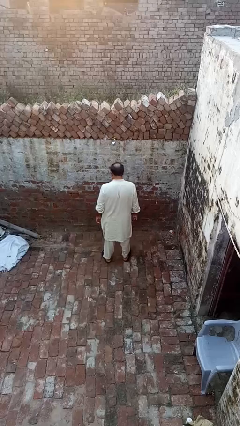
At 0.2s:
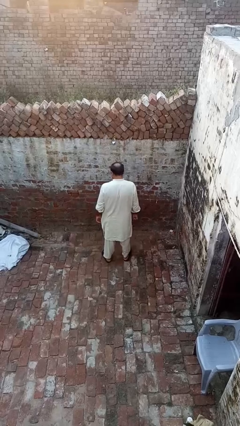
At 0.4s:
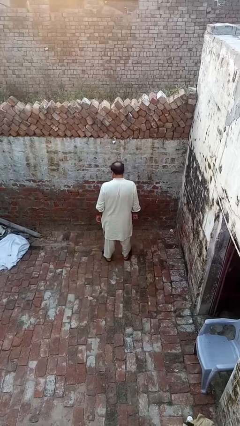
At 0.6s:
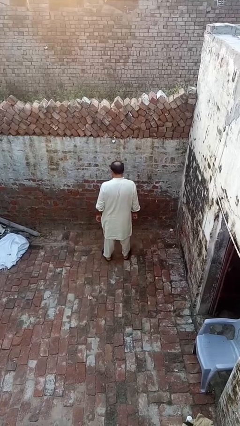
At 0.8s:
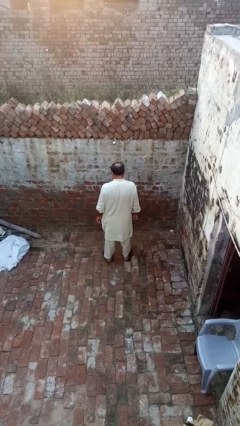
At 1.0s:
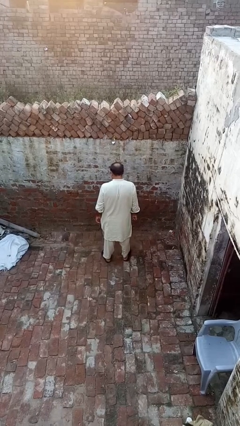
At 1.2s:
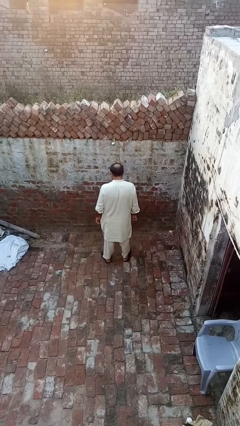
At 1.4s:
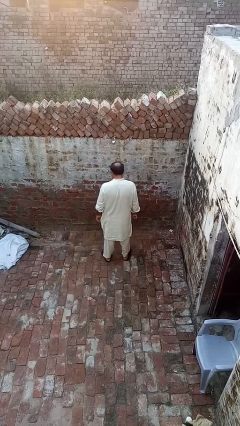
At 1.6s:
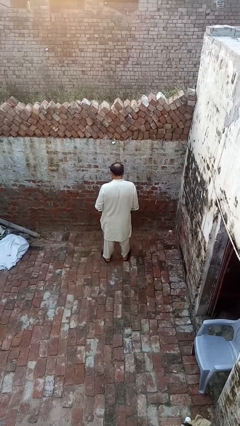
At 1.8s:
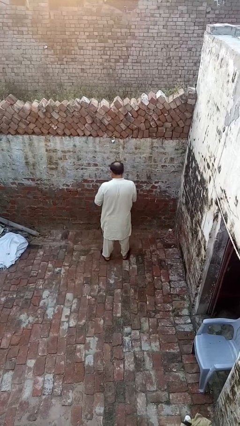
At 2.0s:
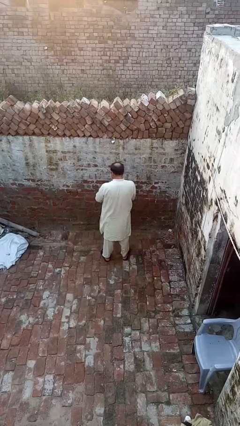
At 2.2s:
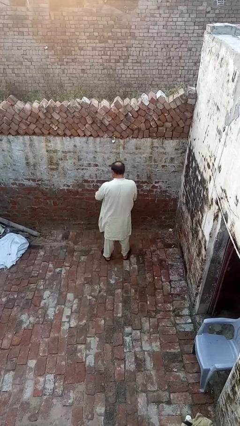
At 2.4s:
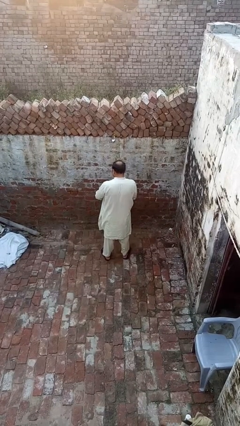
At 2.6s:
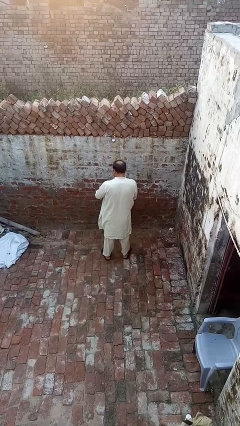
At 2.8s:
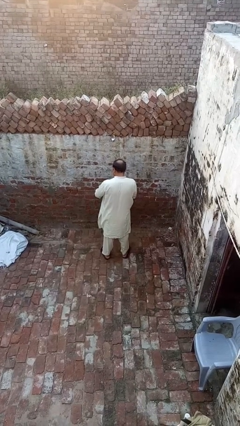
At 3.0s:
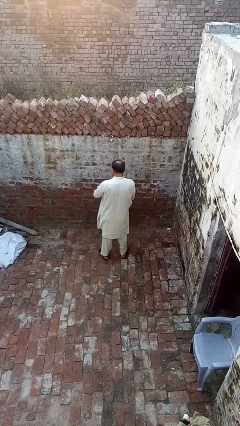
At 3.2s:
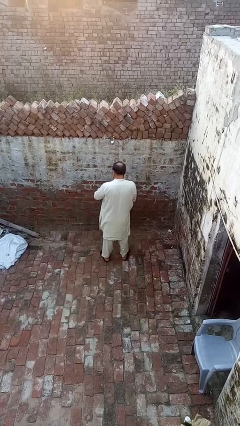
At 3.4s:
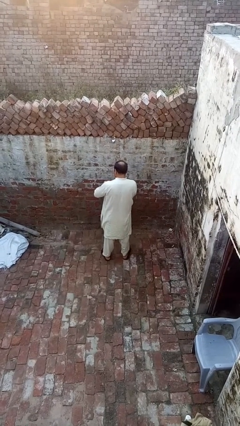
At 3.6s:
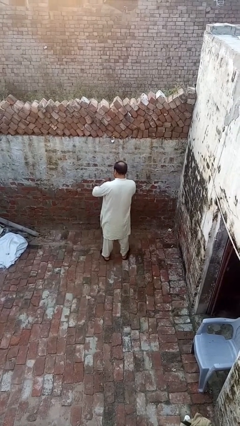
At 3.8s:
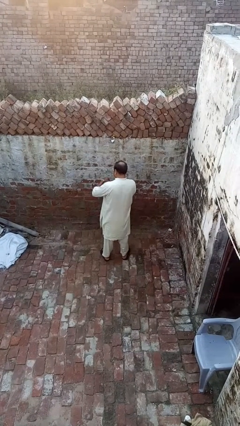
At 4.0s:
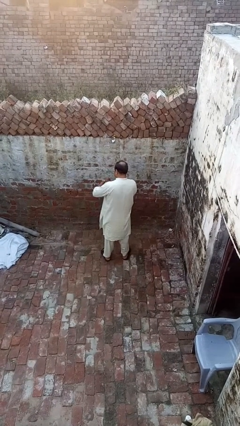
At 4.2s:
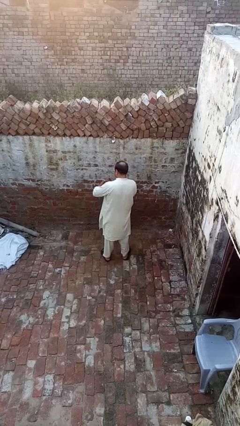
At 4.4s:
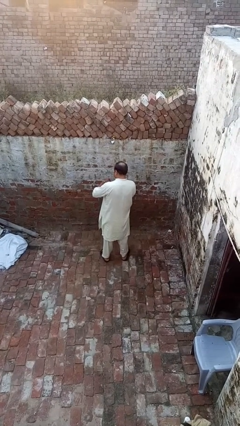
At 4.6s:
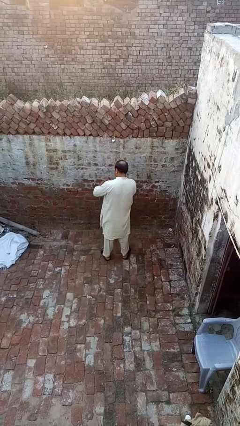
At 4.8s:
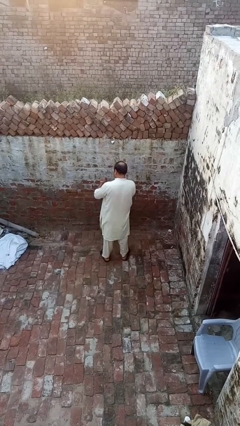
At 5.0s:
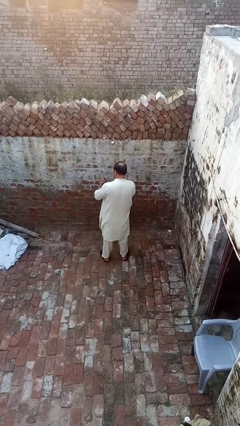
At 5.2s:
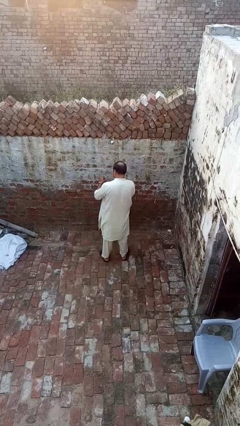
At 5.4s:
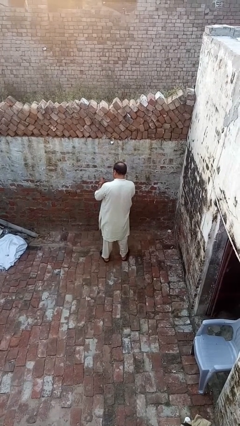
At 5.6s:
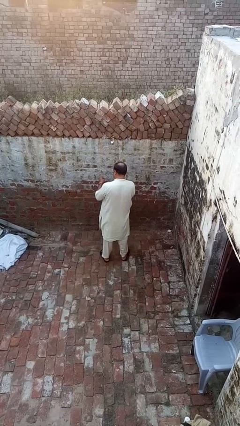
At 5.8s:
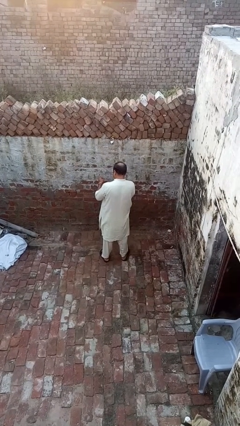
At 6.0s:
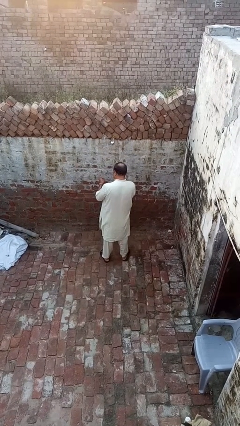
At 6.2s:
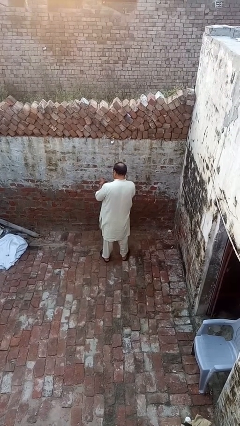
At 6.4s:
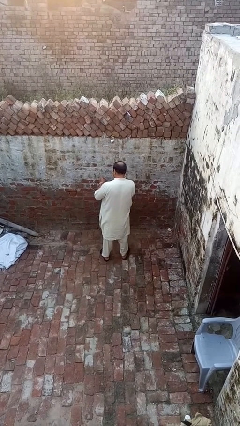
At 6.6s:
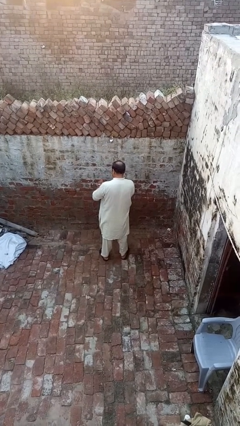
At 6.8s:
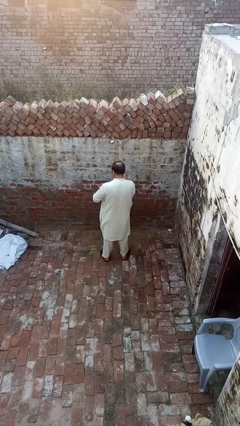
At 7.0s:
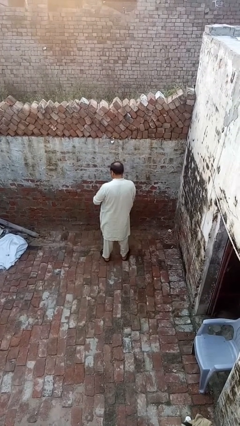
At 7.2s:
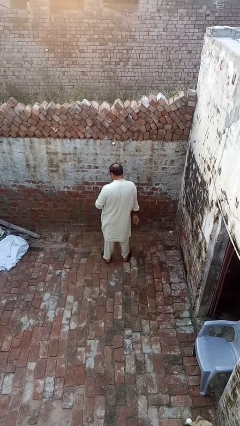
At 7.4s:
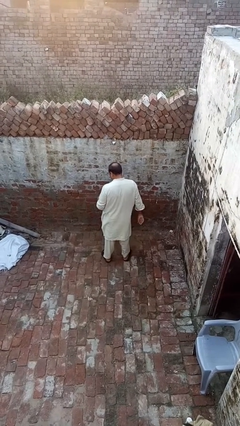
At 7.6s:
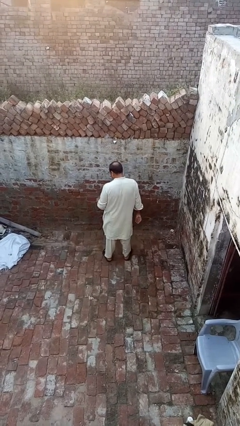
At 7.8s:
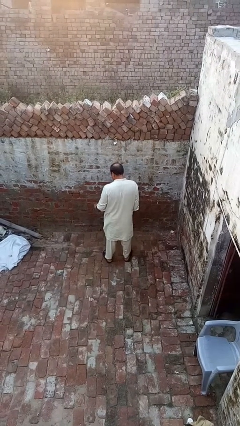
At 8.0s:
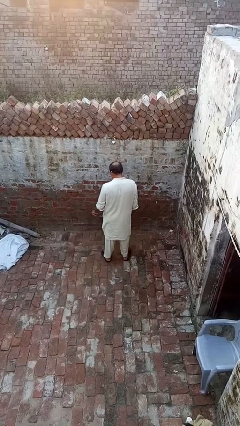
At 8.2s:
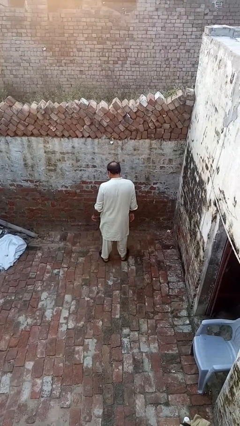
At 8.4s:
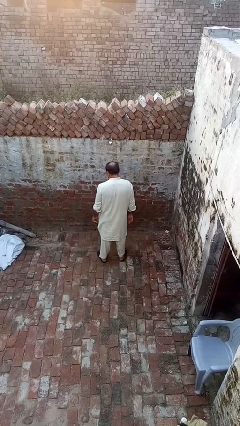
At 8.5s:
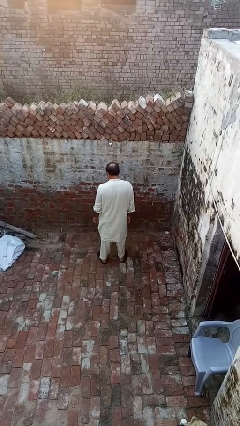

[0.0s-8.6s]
person puts on wristwatch

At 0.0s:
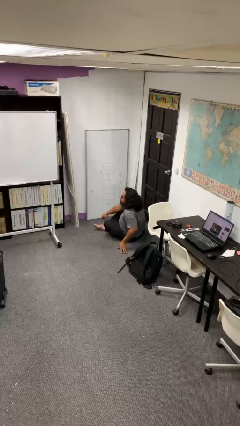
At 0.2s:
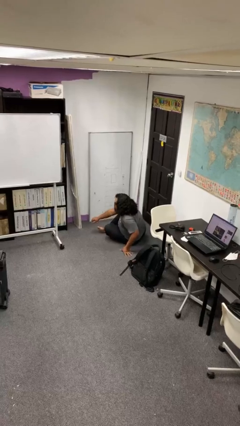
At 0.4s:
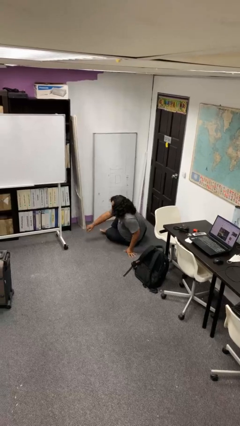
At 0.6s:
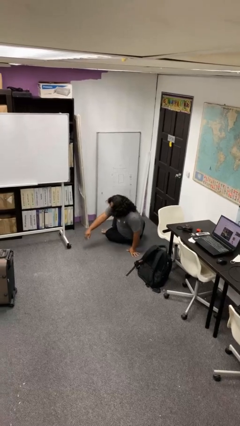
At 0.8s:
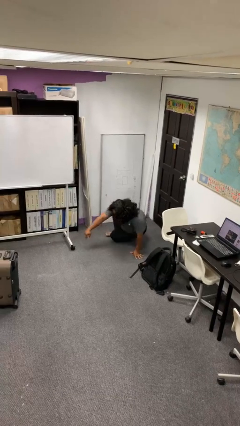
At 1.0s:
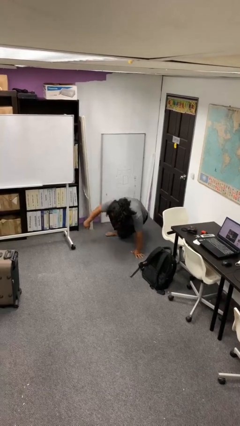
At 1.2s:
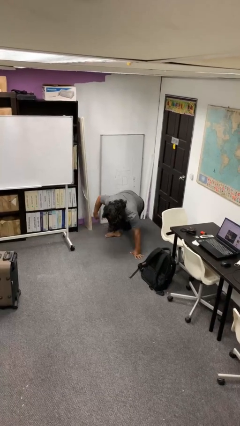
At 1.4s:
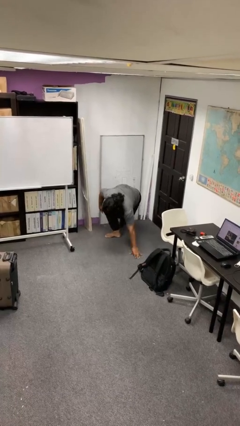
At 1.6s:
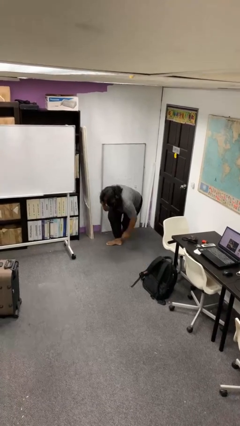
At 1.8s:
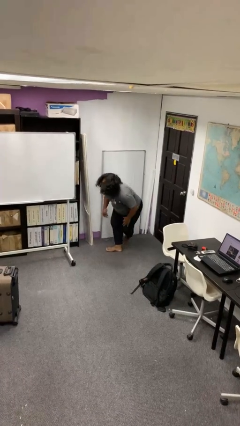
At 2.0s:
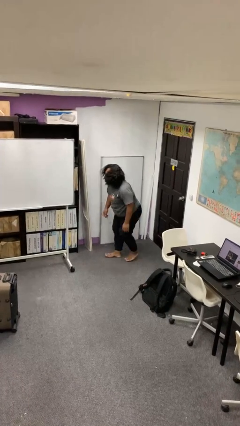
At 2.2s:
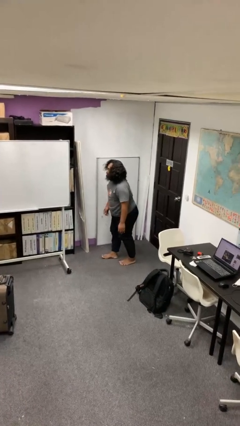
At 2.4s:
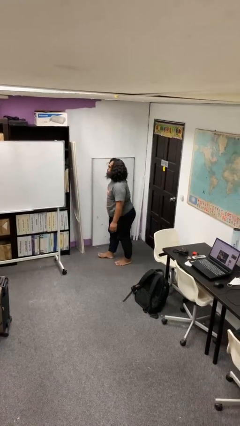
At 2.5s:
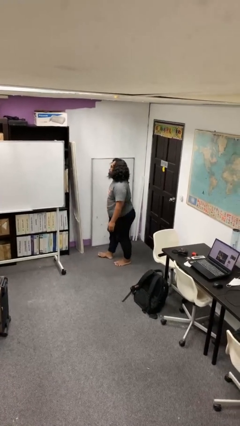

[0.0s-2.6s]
person stands up from floor

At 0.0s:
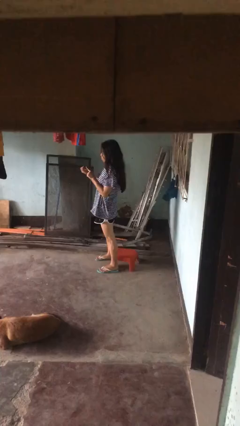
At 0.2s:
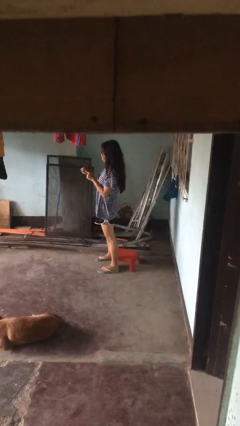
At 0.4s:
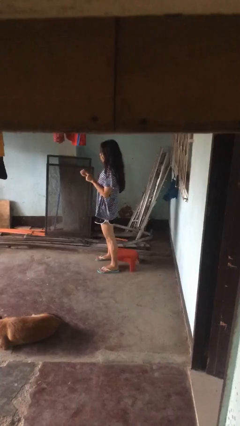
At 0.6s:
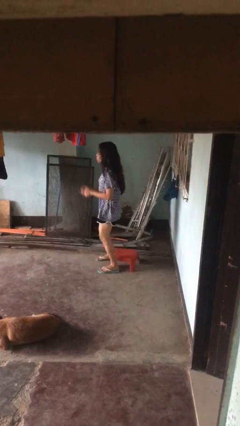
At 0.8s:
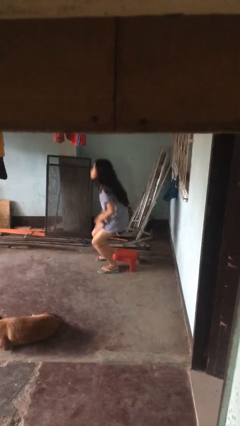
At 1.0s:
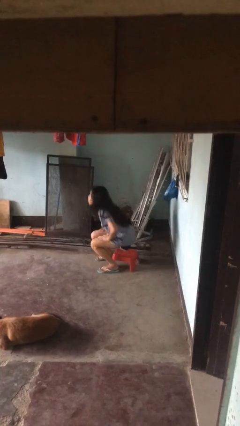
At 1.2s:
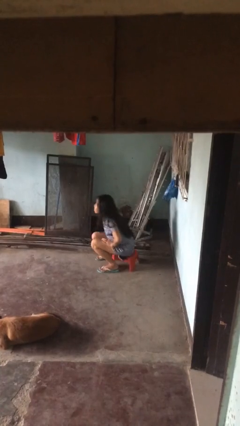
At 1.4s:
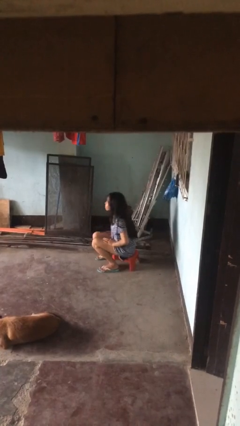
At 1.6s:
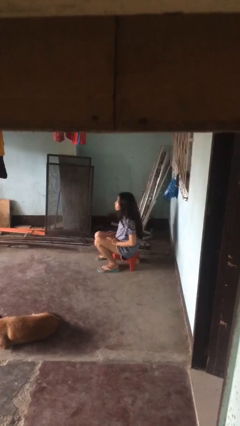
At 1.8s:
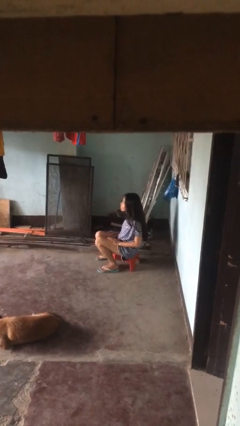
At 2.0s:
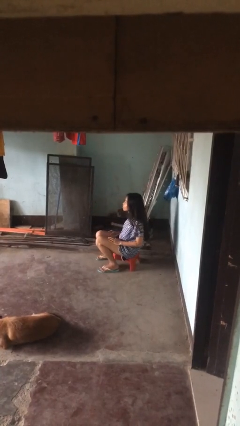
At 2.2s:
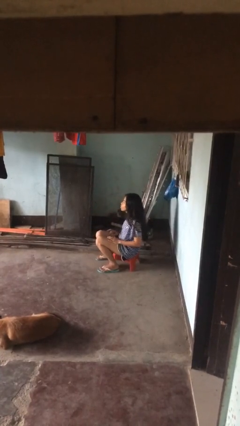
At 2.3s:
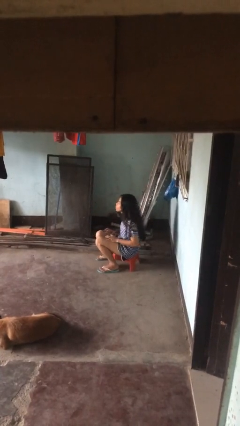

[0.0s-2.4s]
person sits down

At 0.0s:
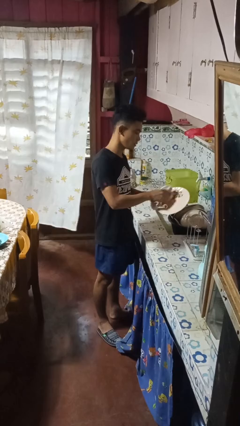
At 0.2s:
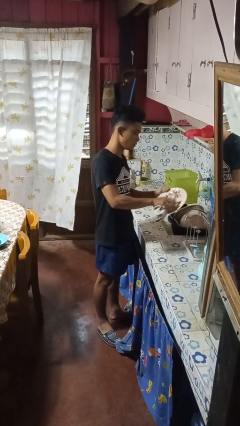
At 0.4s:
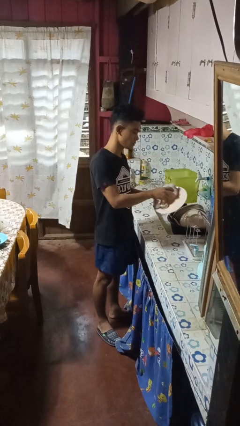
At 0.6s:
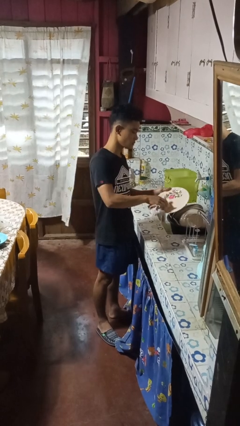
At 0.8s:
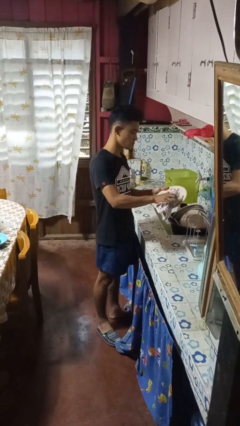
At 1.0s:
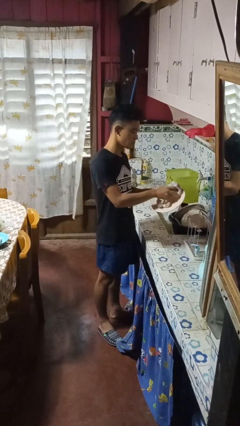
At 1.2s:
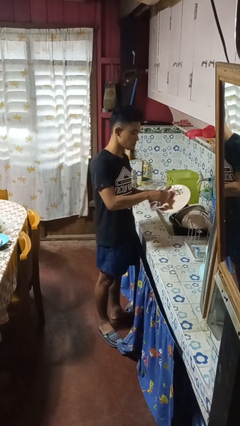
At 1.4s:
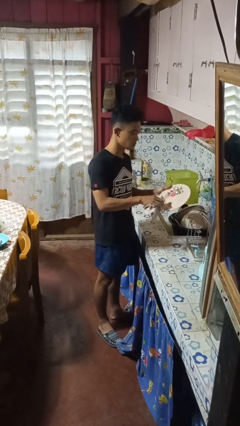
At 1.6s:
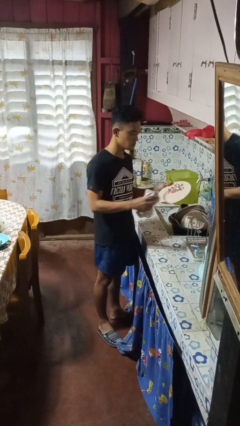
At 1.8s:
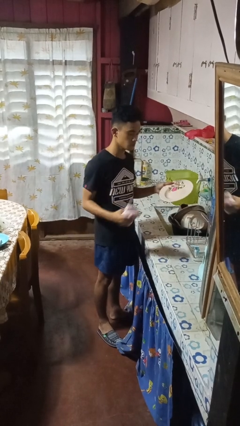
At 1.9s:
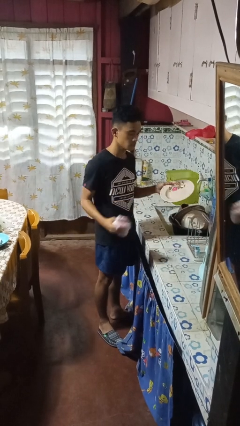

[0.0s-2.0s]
person dries dish

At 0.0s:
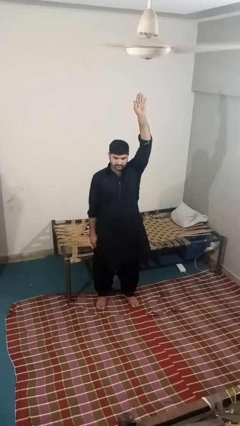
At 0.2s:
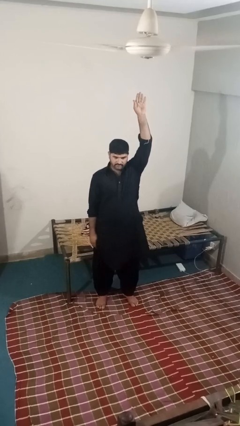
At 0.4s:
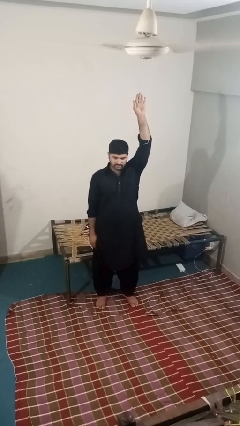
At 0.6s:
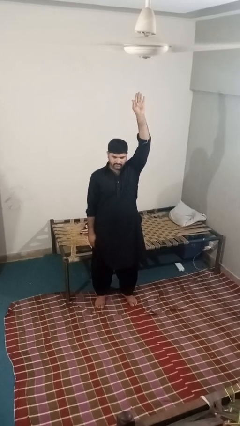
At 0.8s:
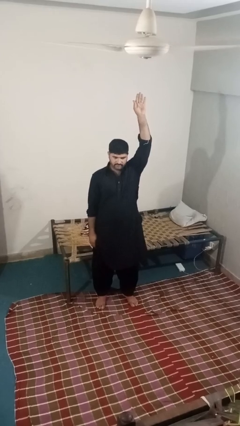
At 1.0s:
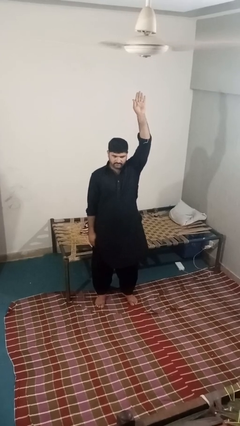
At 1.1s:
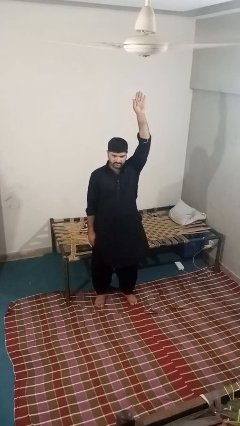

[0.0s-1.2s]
person gestures raise hand

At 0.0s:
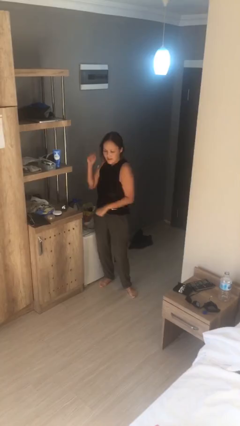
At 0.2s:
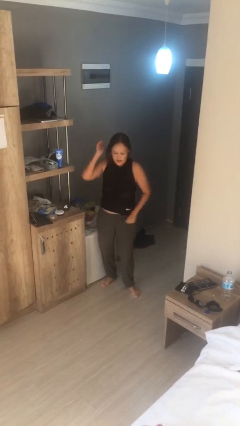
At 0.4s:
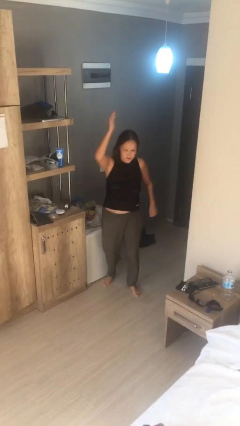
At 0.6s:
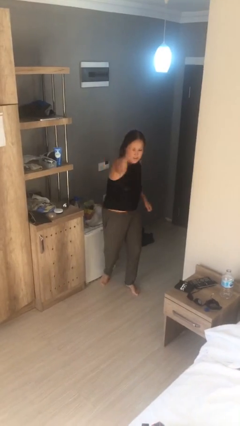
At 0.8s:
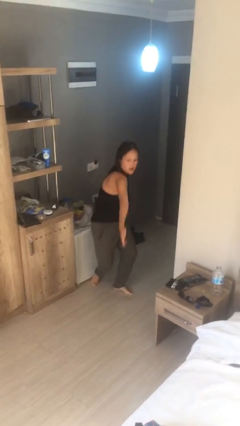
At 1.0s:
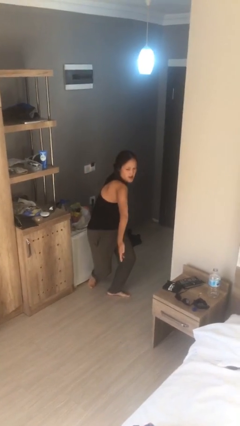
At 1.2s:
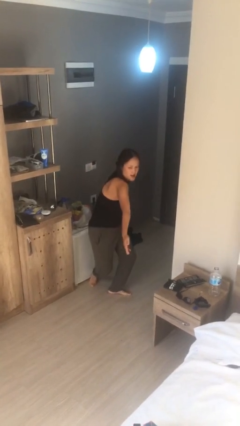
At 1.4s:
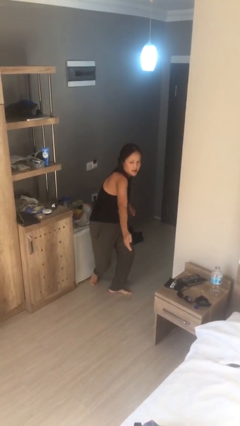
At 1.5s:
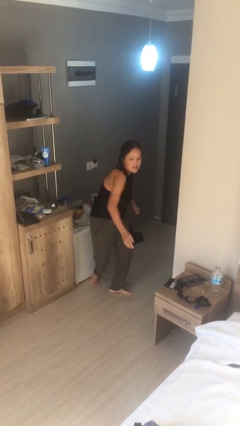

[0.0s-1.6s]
person karate chop
